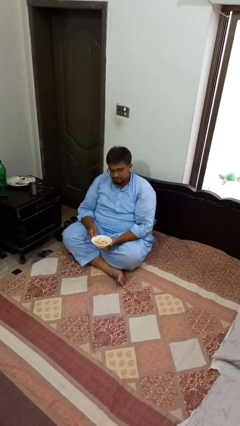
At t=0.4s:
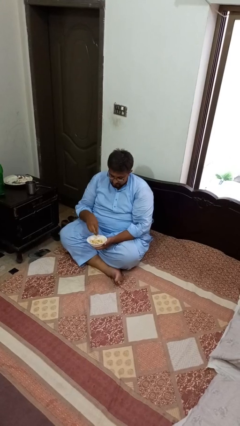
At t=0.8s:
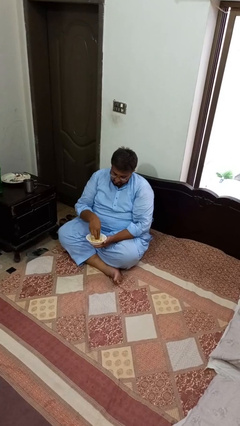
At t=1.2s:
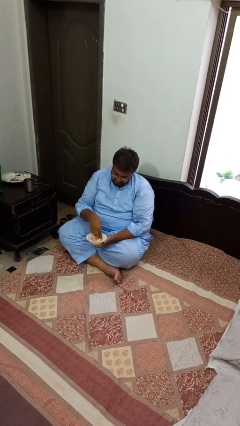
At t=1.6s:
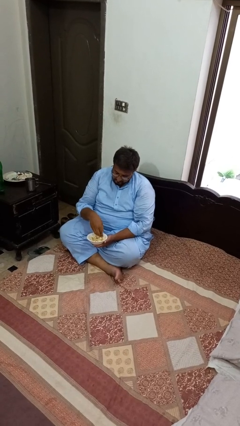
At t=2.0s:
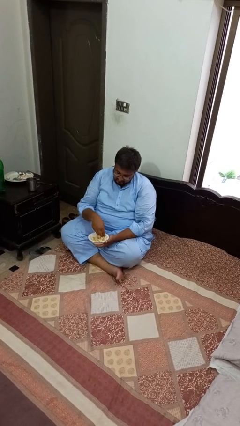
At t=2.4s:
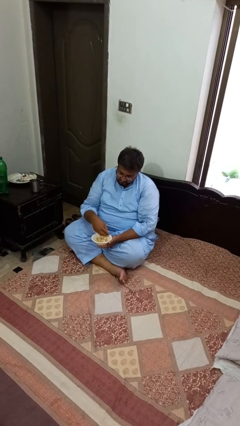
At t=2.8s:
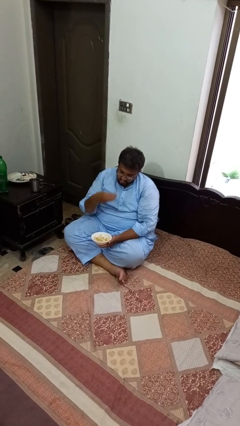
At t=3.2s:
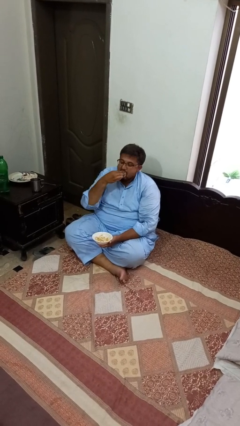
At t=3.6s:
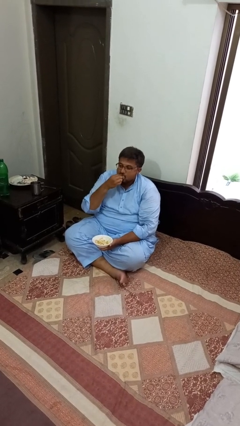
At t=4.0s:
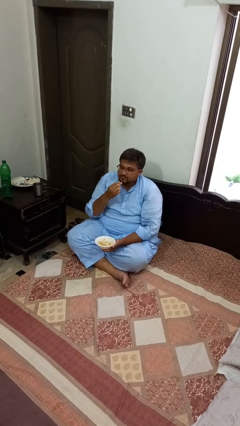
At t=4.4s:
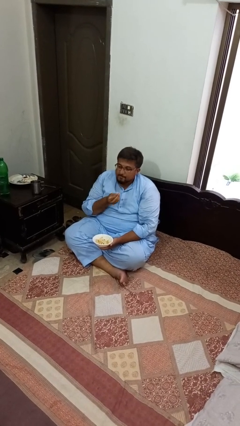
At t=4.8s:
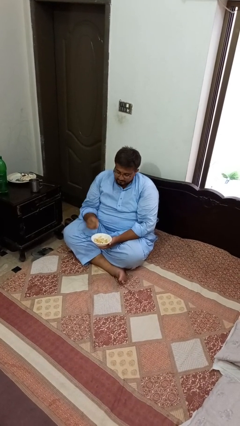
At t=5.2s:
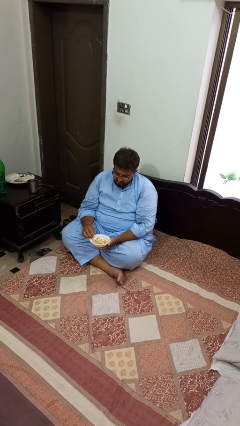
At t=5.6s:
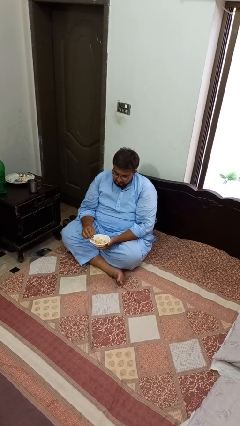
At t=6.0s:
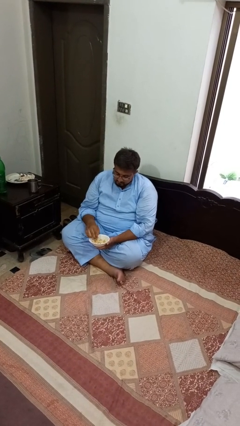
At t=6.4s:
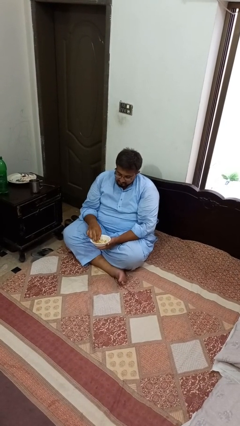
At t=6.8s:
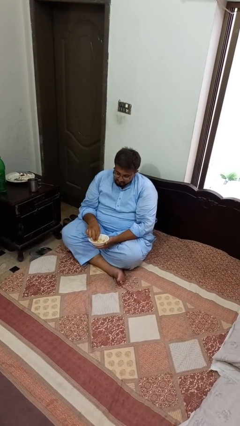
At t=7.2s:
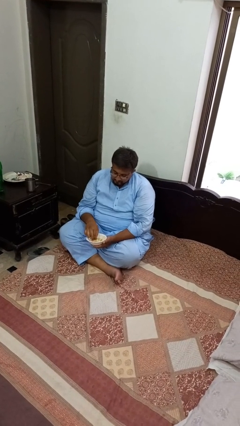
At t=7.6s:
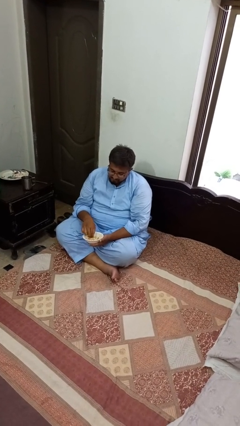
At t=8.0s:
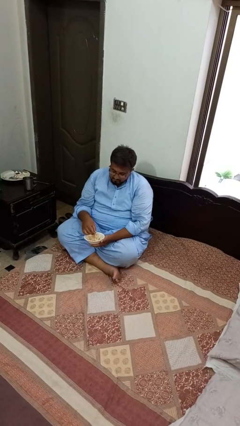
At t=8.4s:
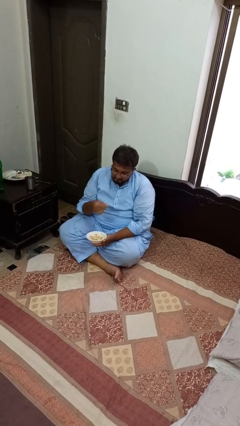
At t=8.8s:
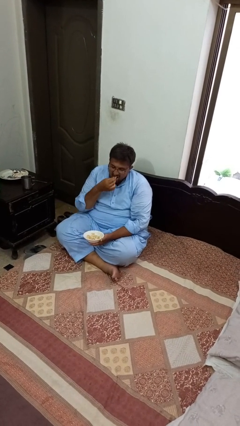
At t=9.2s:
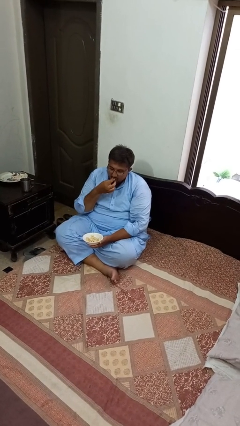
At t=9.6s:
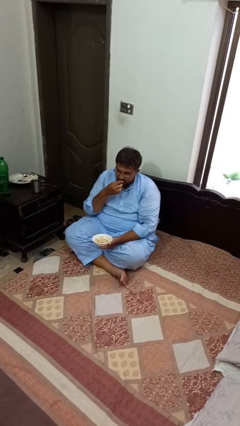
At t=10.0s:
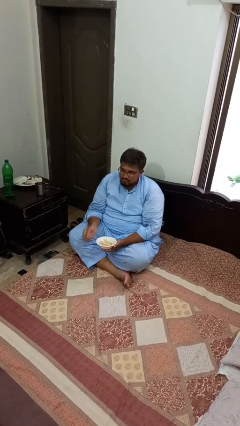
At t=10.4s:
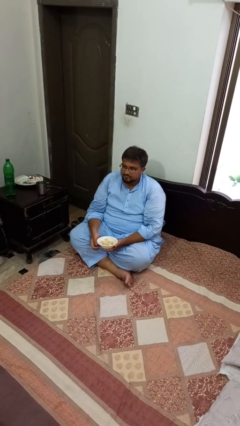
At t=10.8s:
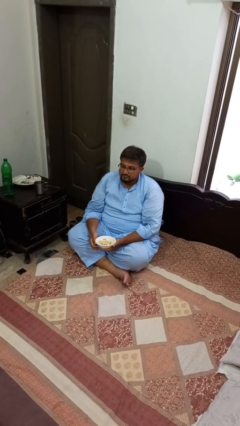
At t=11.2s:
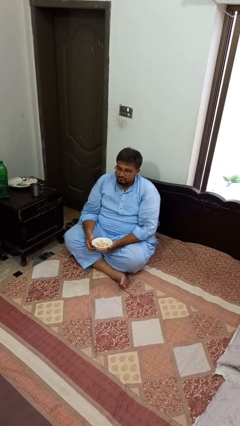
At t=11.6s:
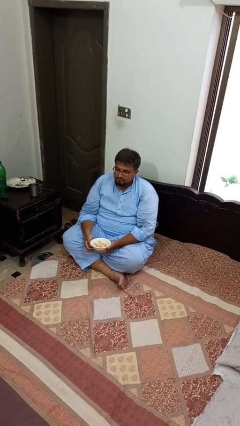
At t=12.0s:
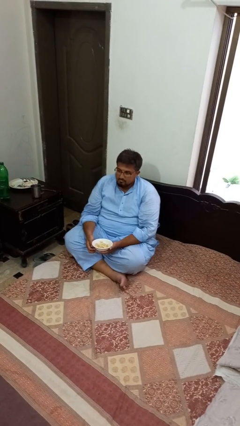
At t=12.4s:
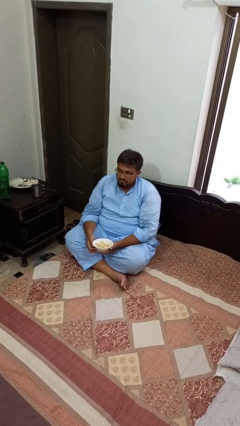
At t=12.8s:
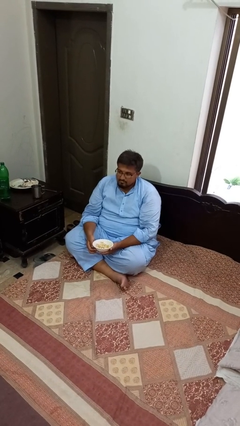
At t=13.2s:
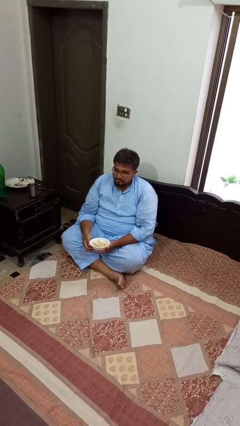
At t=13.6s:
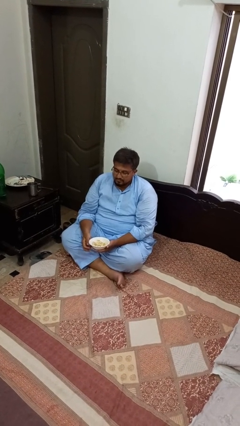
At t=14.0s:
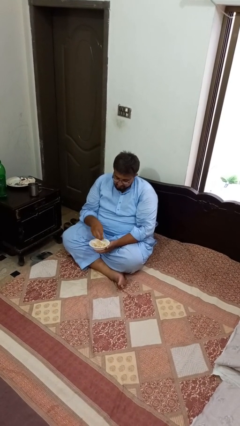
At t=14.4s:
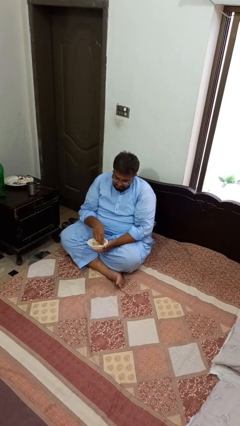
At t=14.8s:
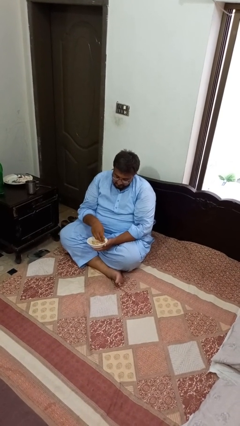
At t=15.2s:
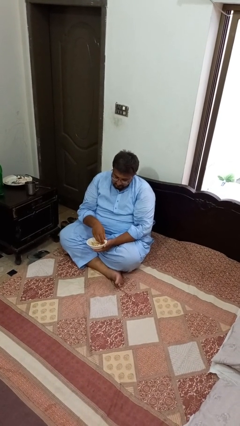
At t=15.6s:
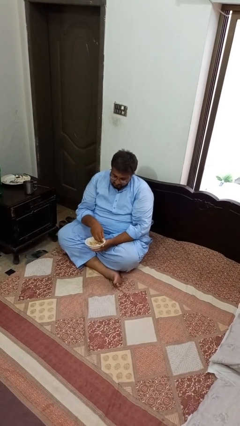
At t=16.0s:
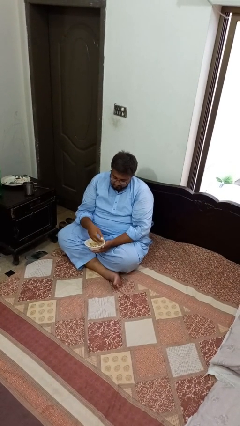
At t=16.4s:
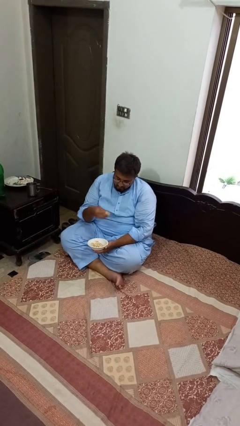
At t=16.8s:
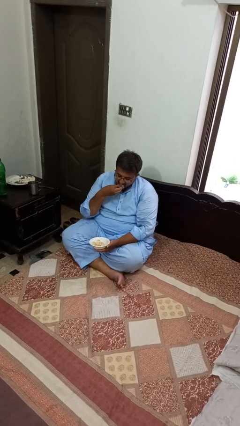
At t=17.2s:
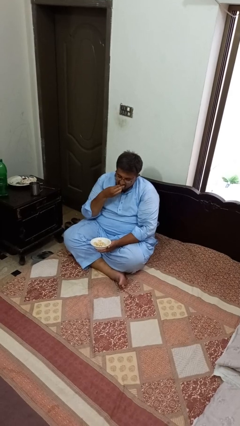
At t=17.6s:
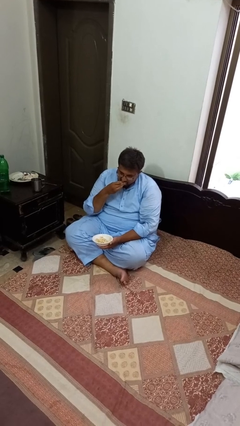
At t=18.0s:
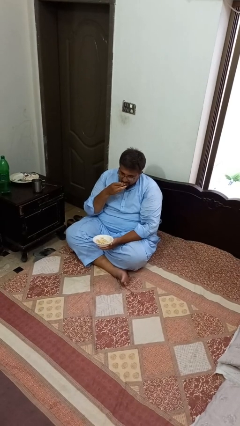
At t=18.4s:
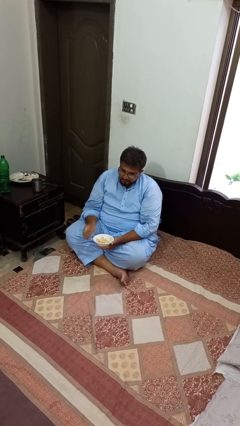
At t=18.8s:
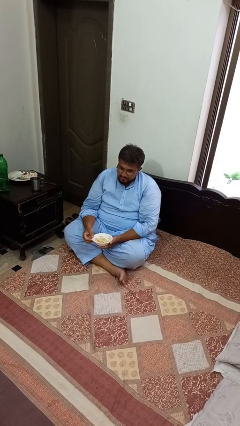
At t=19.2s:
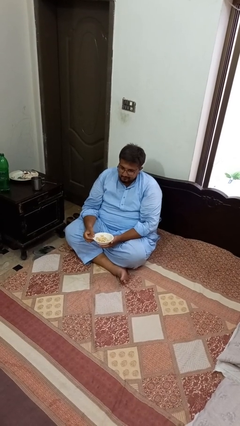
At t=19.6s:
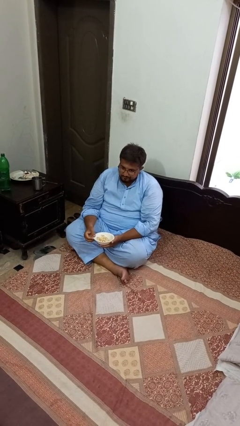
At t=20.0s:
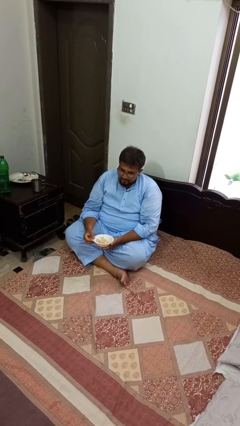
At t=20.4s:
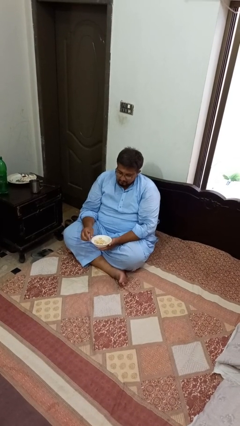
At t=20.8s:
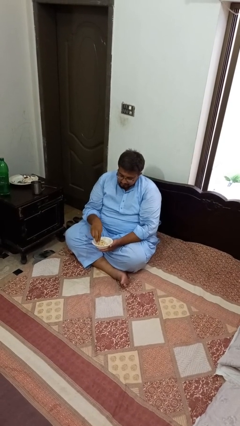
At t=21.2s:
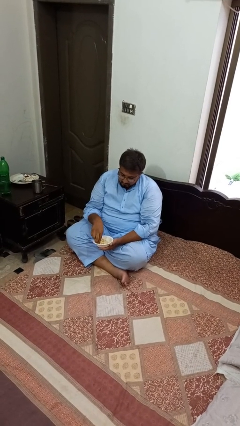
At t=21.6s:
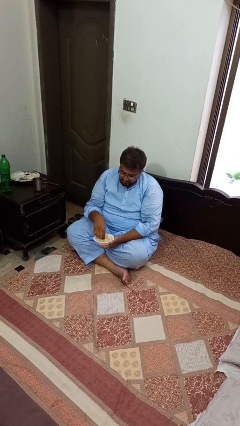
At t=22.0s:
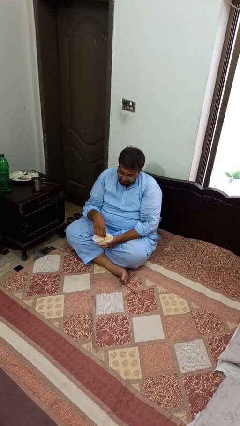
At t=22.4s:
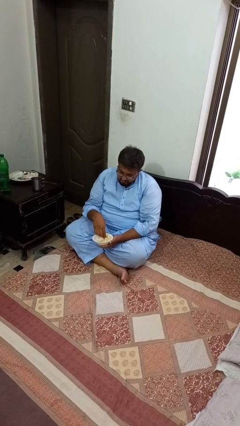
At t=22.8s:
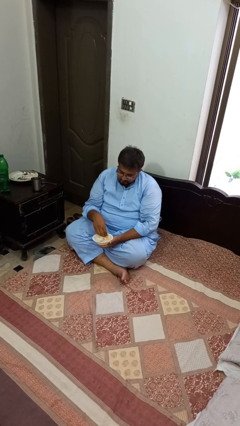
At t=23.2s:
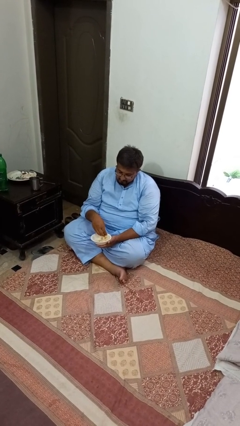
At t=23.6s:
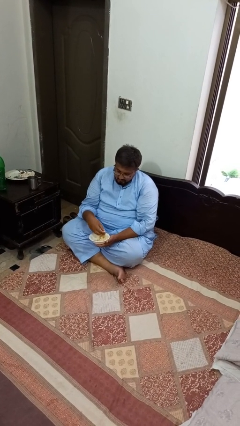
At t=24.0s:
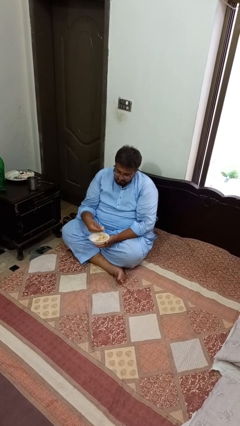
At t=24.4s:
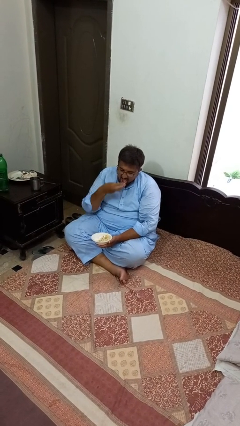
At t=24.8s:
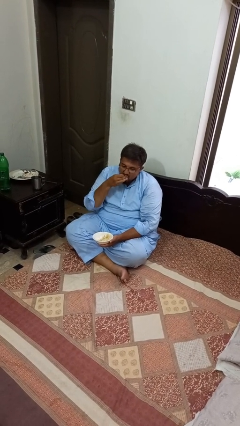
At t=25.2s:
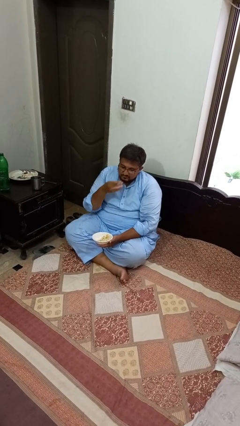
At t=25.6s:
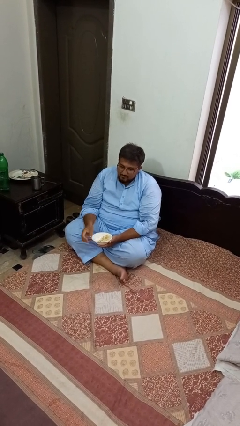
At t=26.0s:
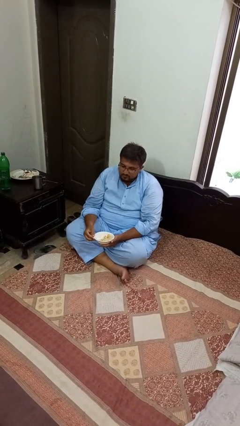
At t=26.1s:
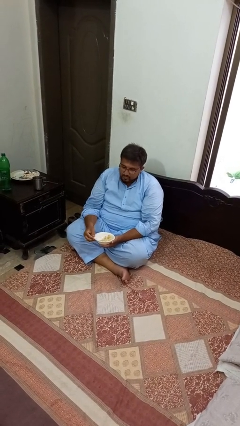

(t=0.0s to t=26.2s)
person eats with hands

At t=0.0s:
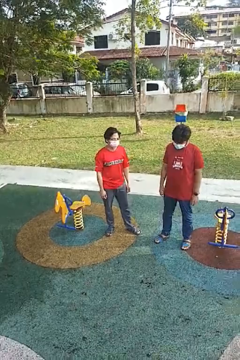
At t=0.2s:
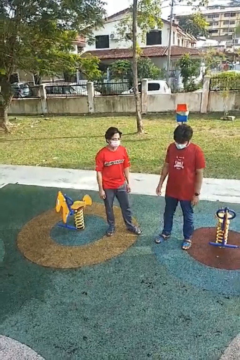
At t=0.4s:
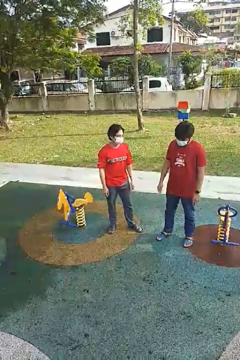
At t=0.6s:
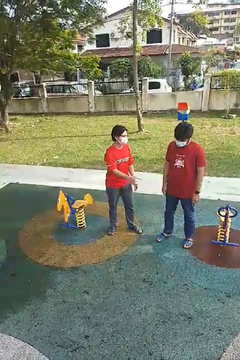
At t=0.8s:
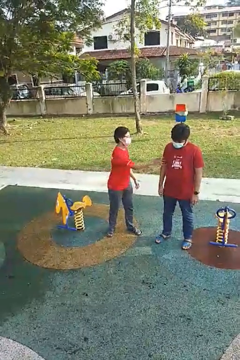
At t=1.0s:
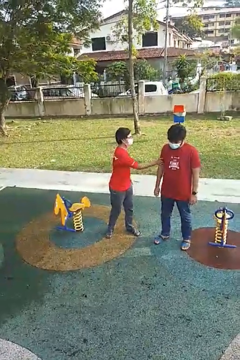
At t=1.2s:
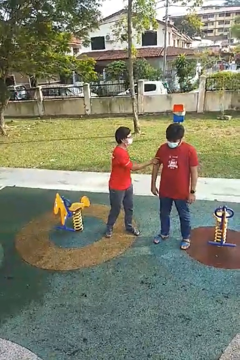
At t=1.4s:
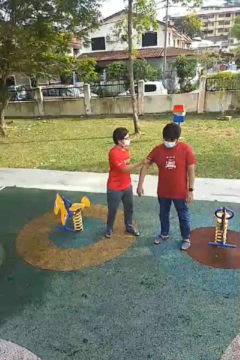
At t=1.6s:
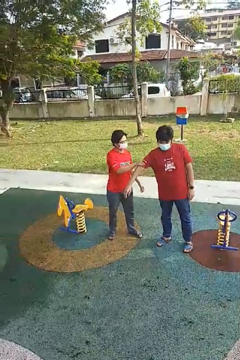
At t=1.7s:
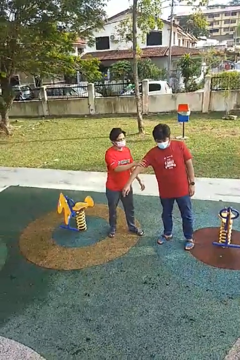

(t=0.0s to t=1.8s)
person grabs person by bicep

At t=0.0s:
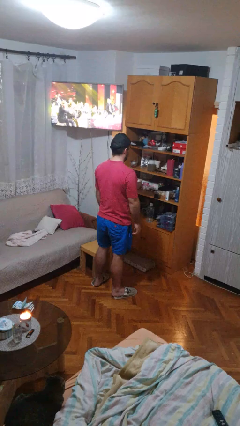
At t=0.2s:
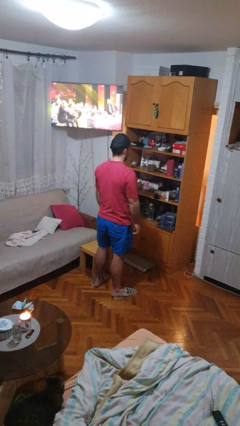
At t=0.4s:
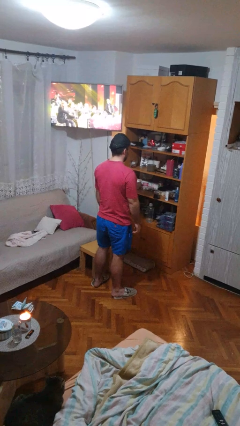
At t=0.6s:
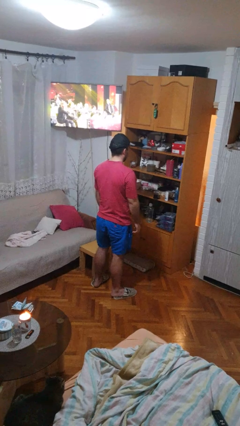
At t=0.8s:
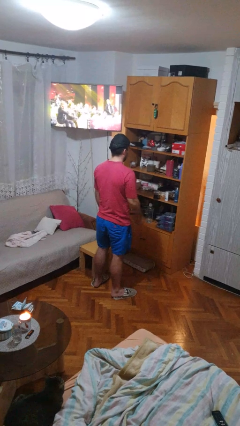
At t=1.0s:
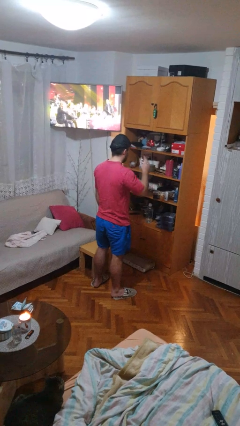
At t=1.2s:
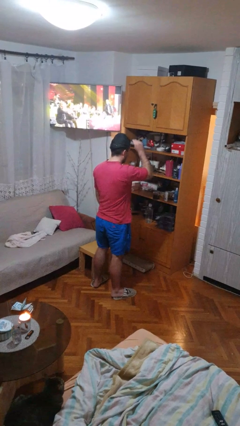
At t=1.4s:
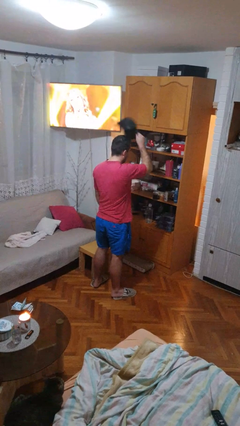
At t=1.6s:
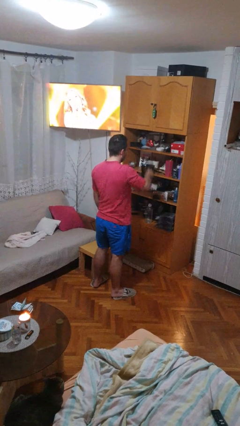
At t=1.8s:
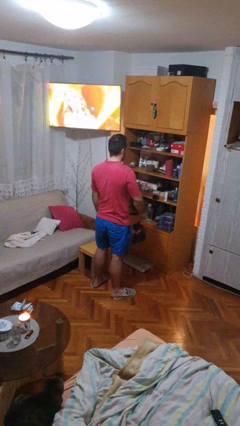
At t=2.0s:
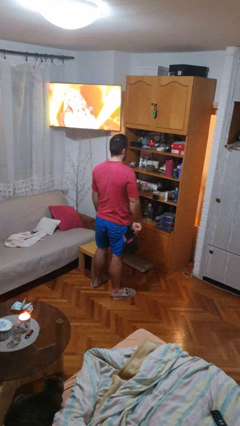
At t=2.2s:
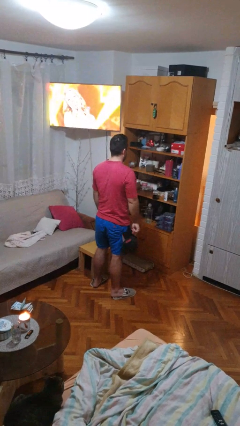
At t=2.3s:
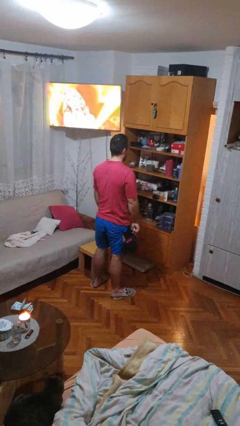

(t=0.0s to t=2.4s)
person takes off hat

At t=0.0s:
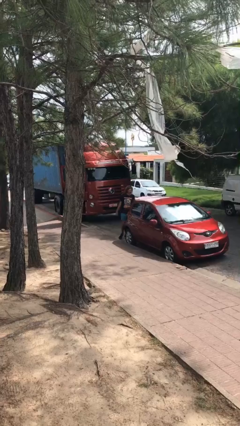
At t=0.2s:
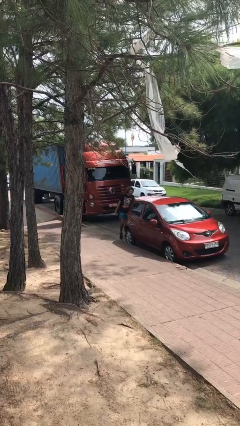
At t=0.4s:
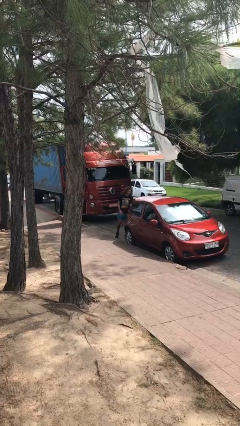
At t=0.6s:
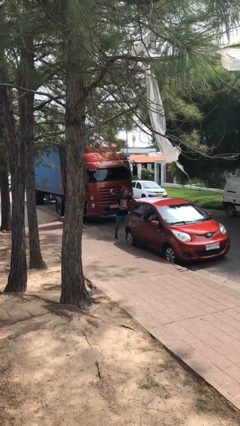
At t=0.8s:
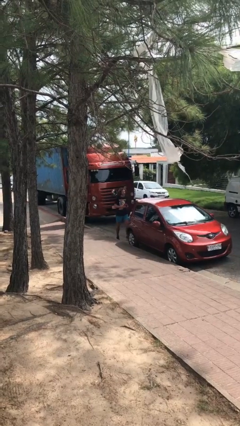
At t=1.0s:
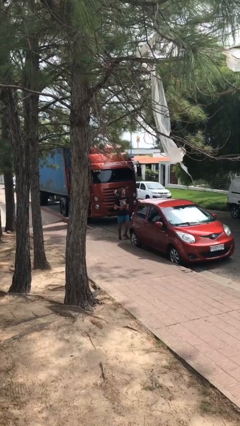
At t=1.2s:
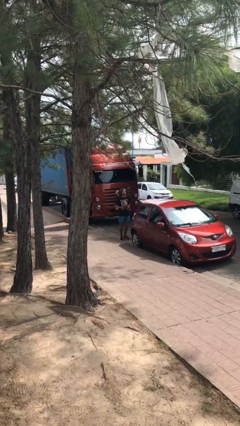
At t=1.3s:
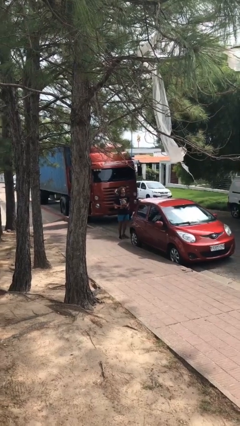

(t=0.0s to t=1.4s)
person unloads car
